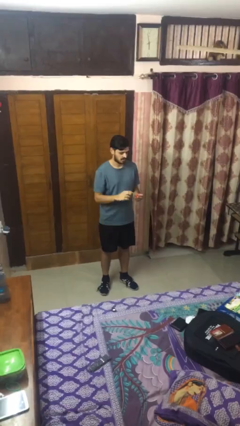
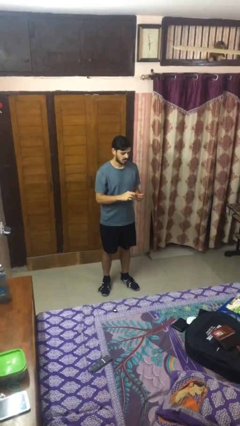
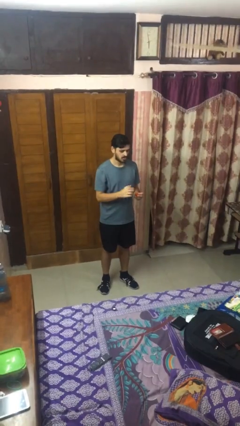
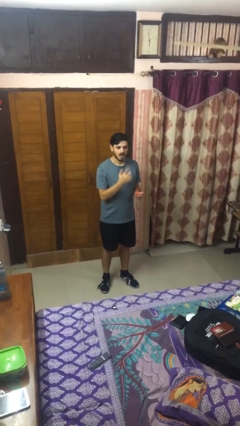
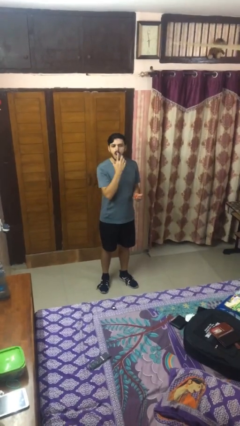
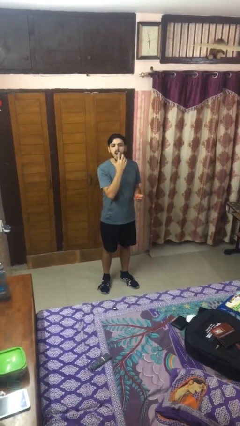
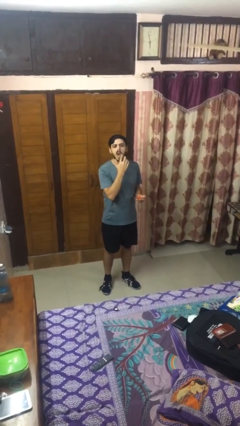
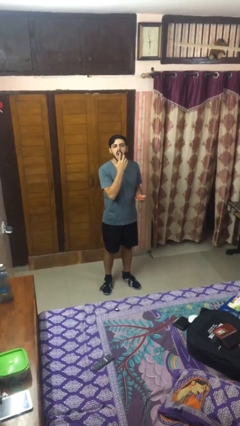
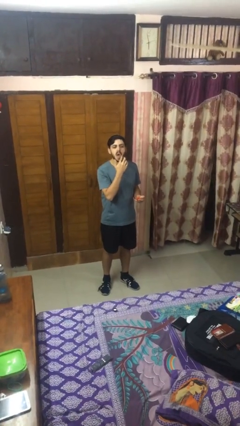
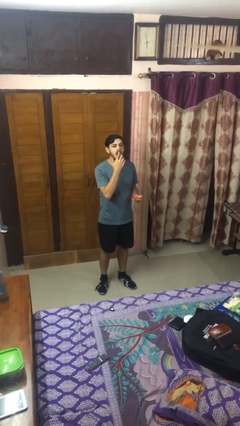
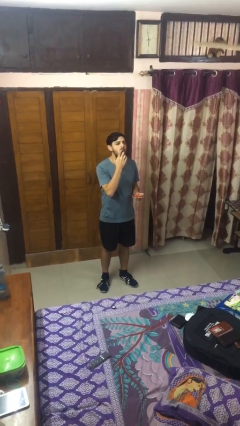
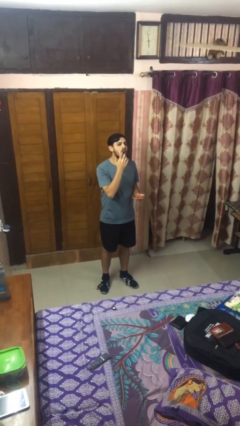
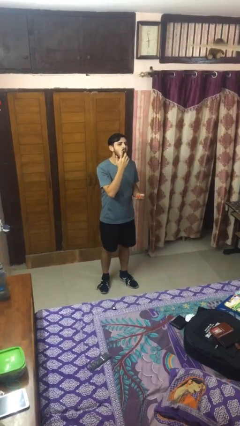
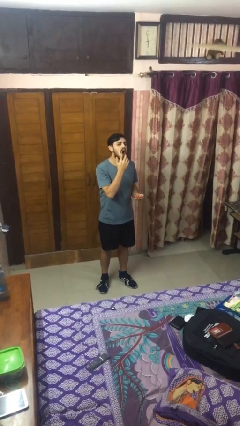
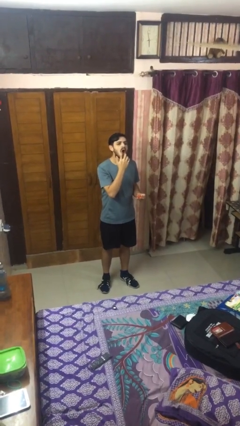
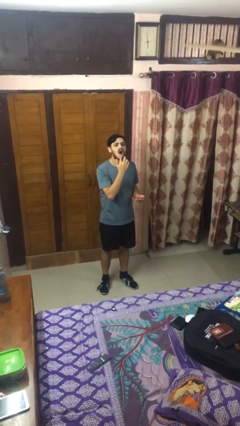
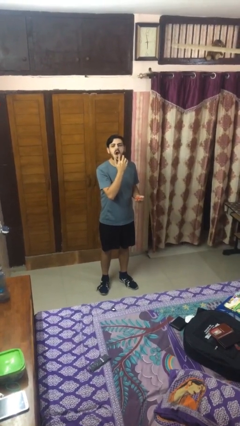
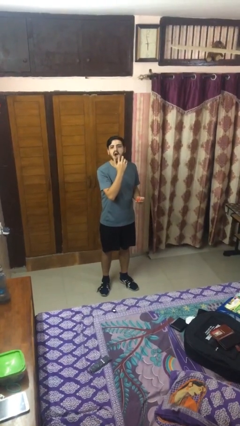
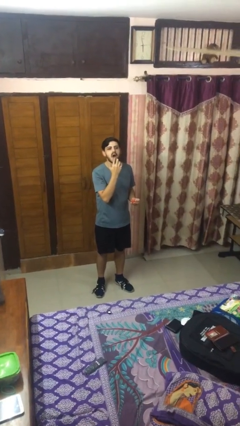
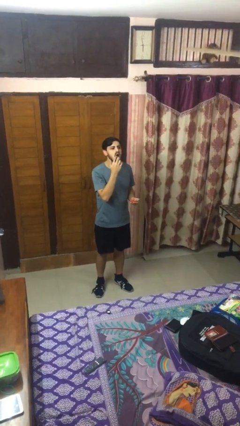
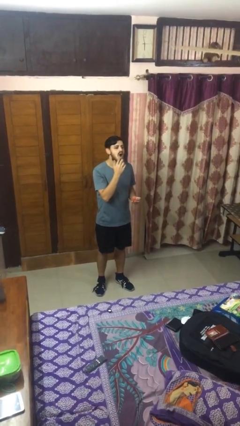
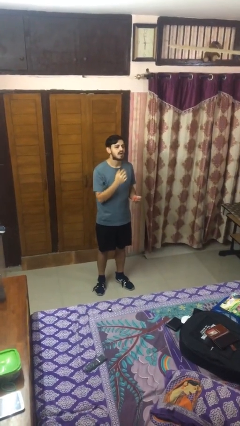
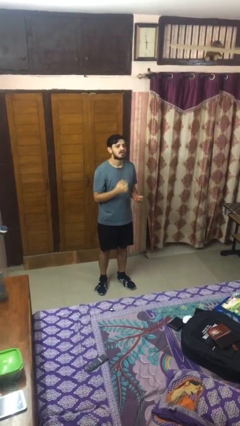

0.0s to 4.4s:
person applies lip makeup

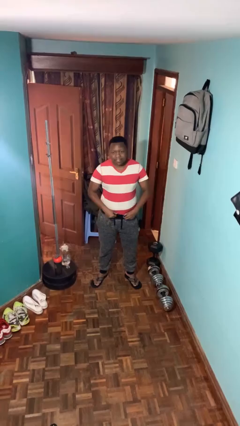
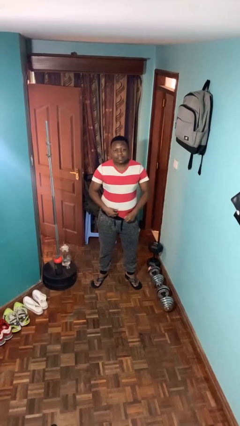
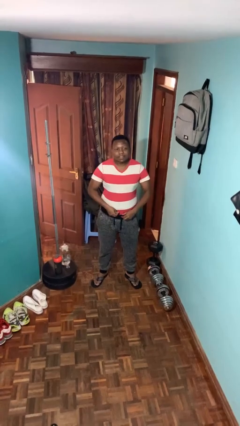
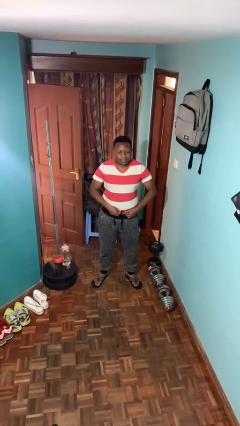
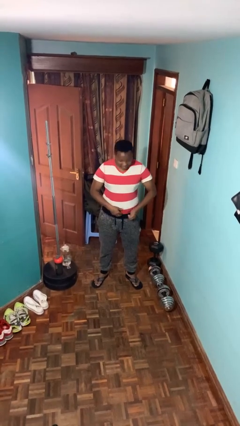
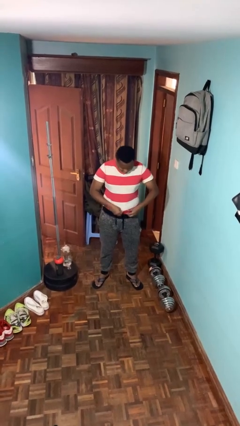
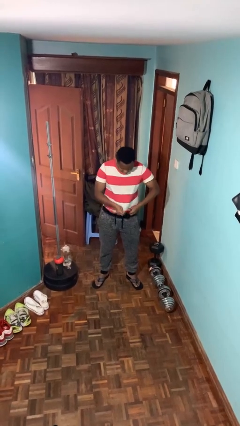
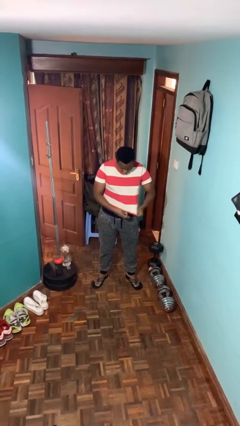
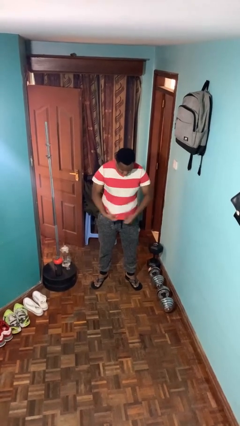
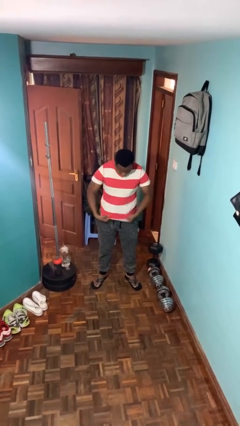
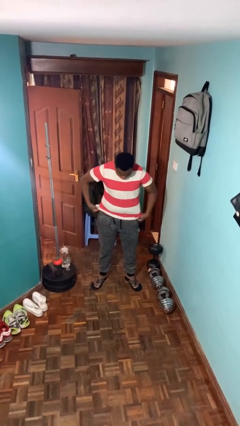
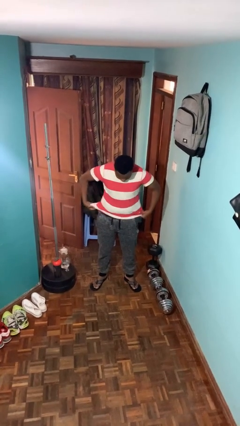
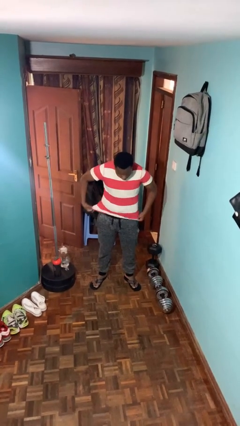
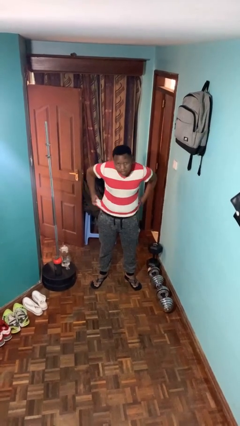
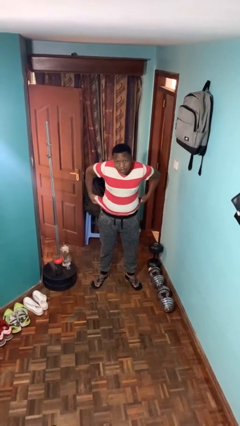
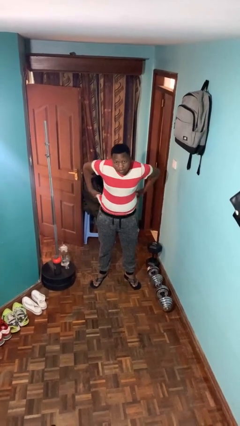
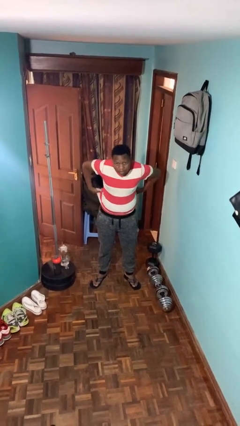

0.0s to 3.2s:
person untucks shirt

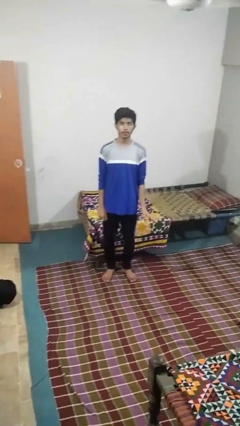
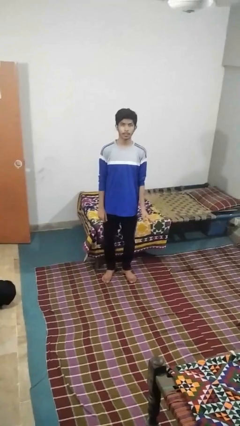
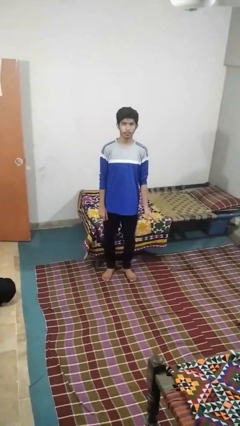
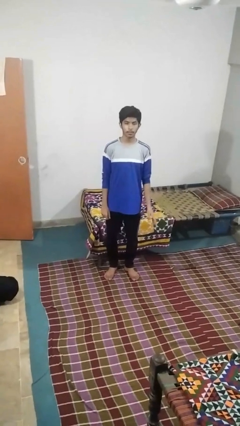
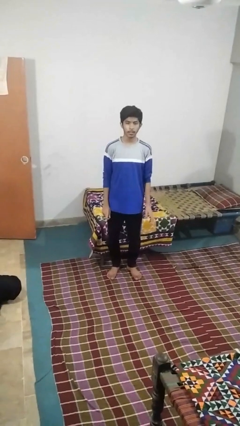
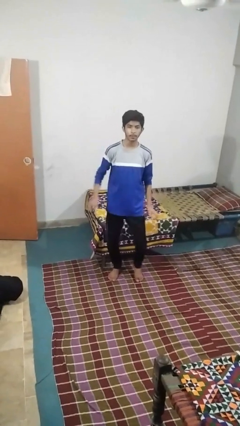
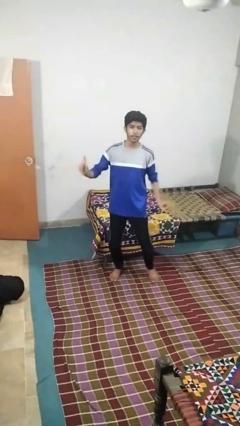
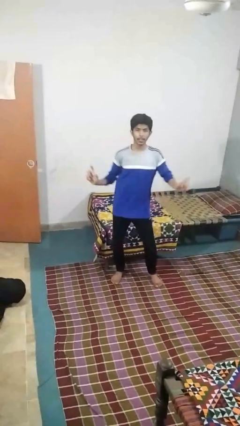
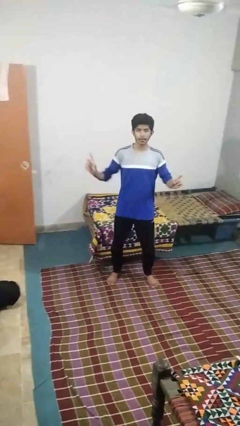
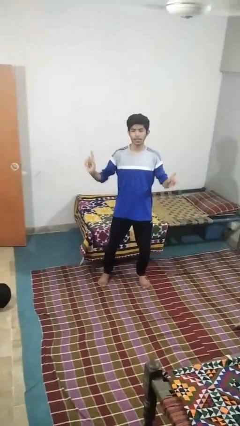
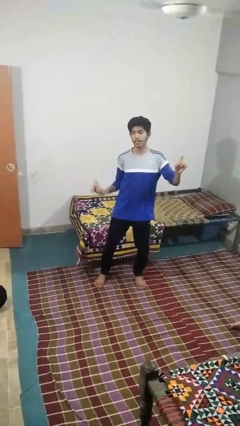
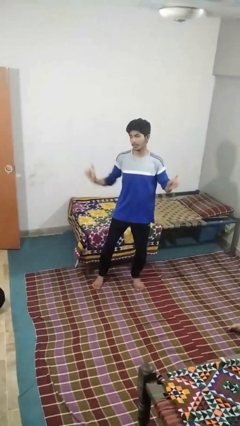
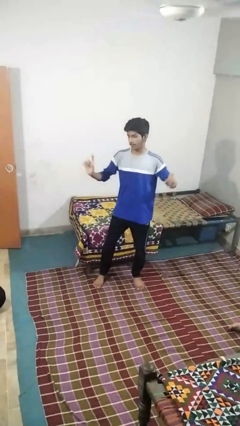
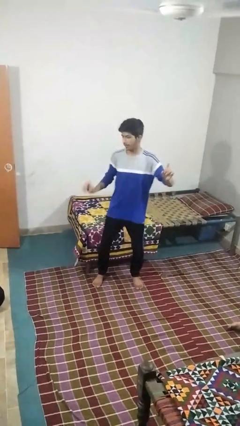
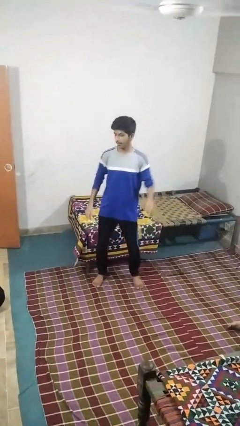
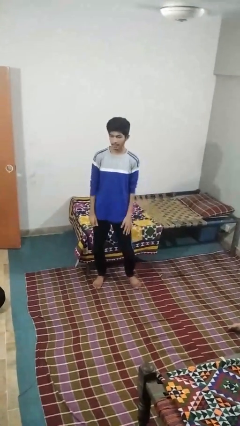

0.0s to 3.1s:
person dances in place

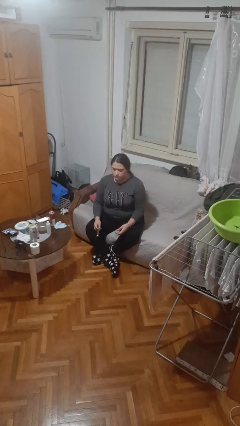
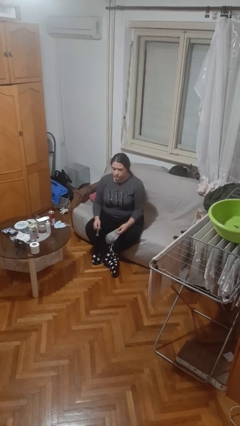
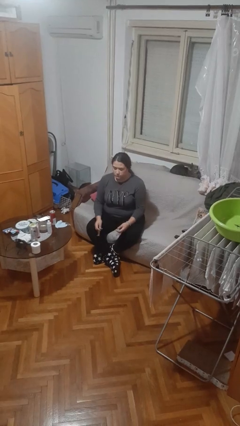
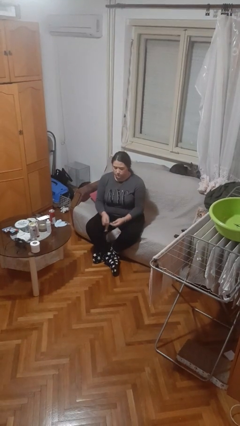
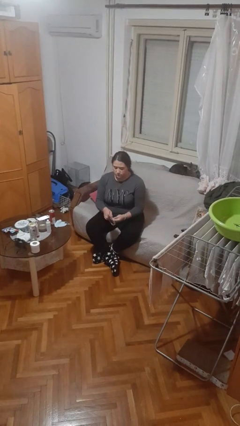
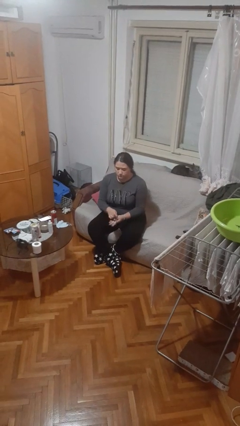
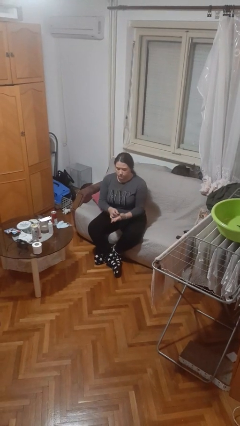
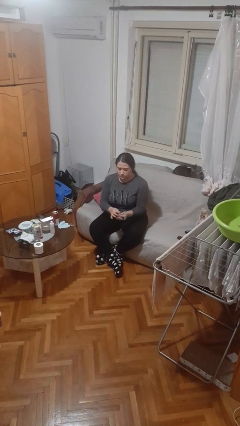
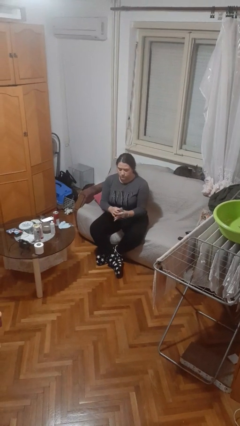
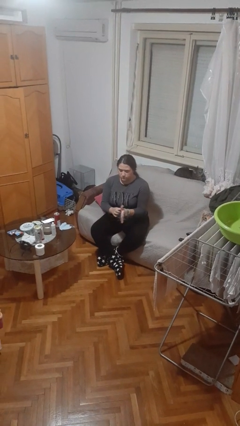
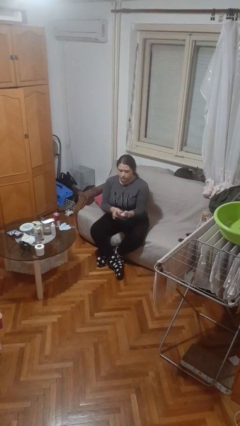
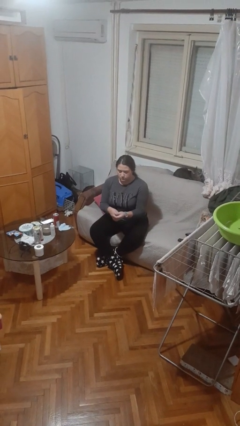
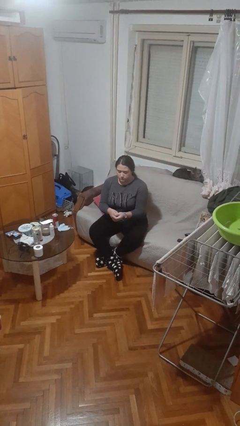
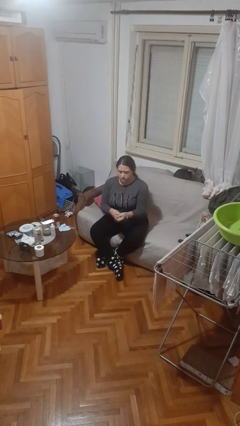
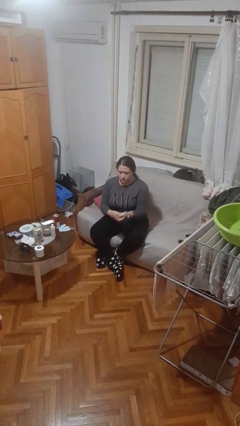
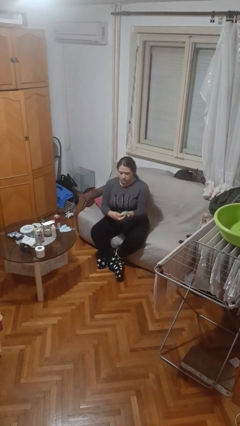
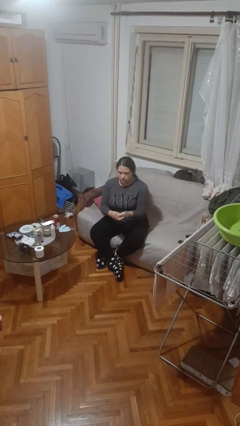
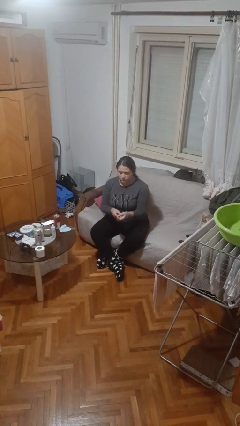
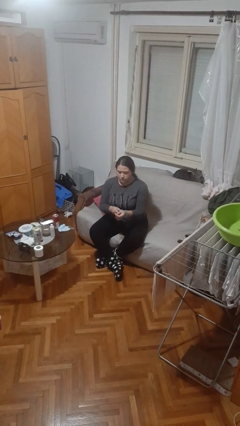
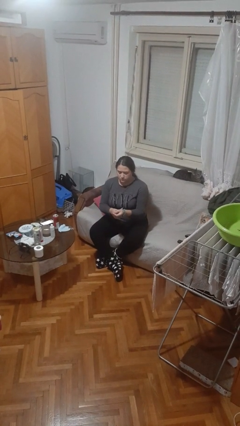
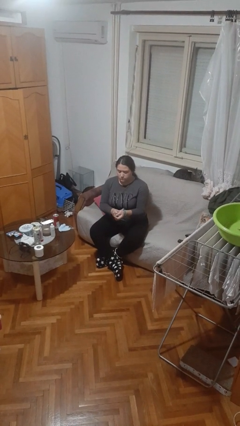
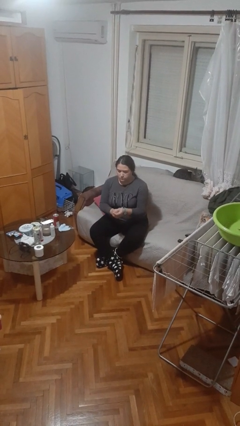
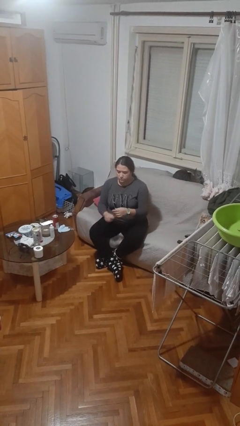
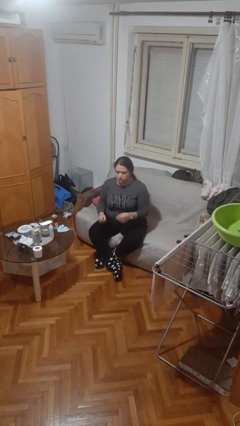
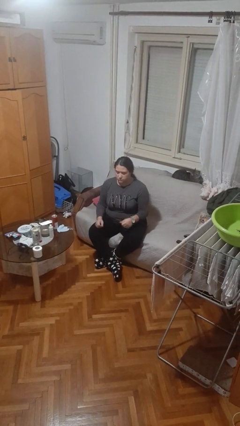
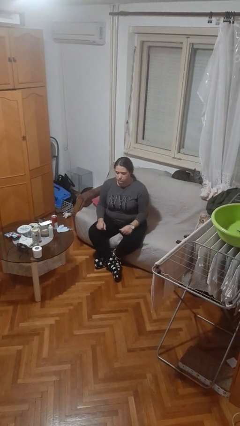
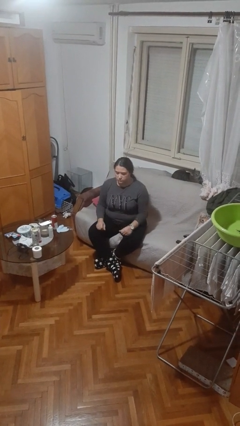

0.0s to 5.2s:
person puts on wristwatch

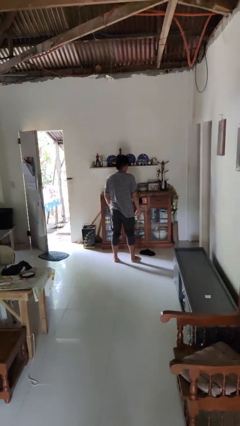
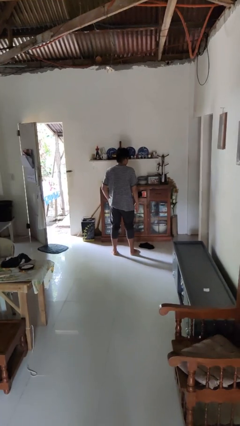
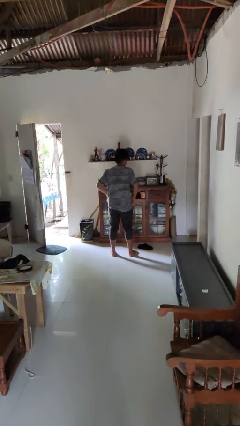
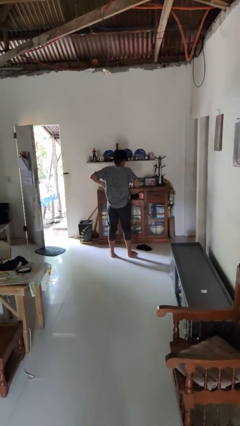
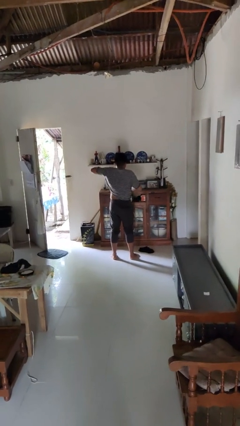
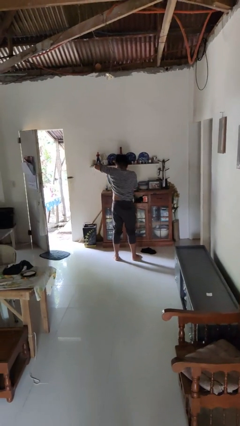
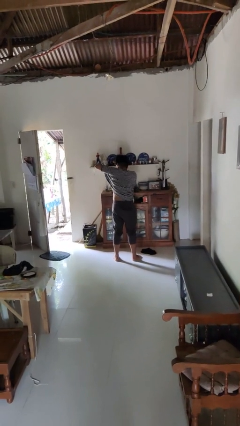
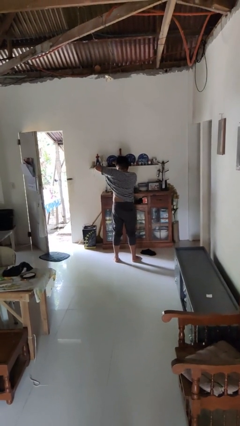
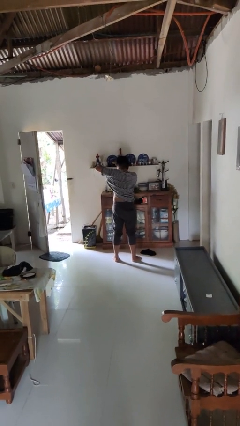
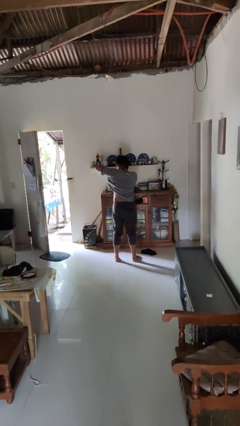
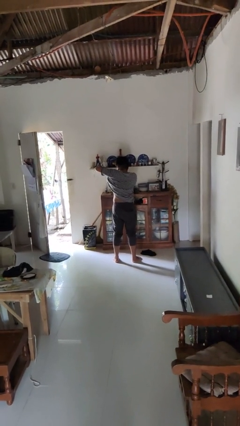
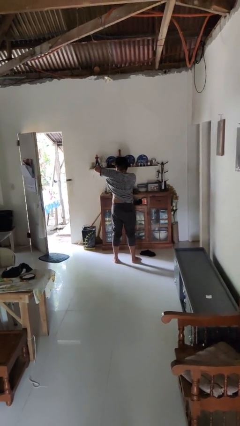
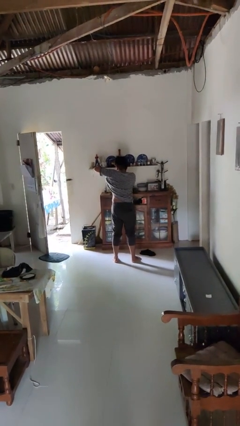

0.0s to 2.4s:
person applies deodorant
